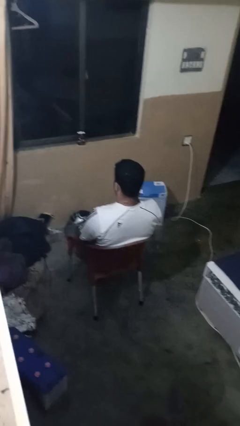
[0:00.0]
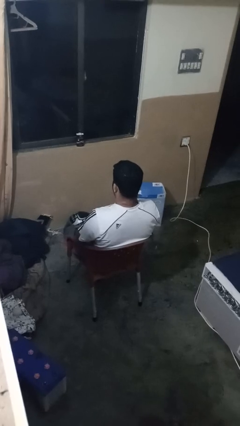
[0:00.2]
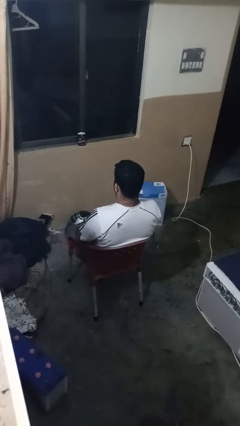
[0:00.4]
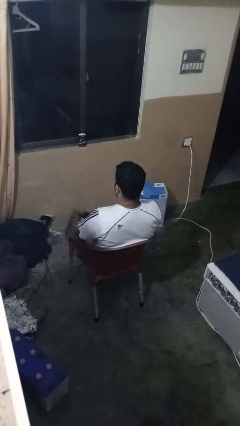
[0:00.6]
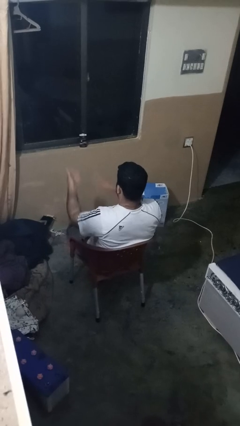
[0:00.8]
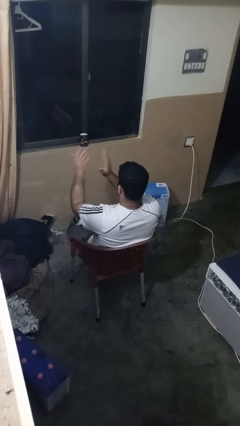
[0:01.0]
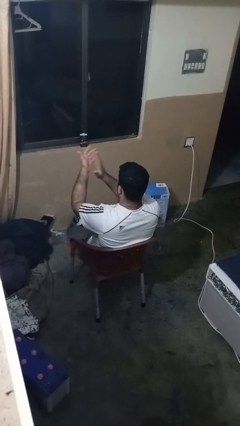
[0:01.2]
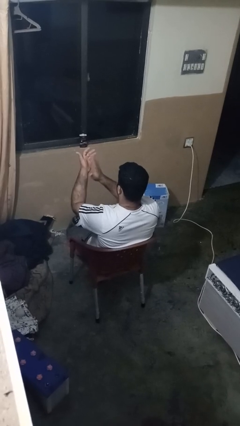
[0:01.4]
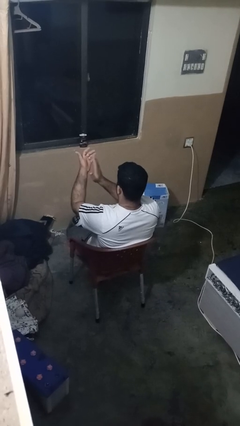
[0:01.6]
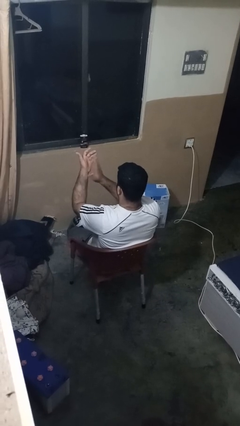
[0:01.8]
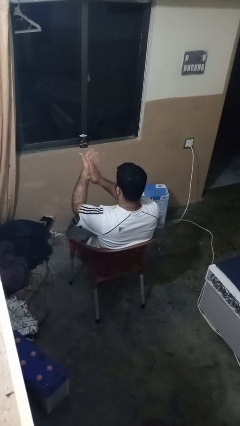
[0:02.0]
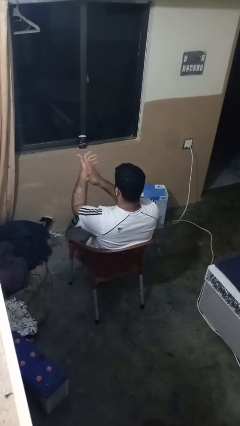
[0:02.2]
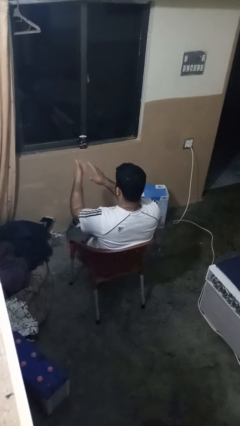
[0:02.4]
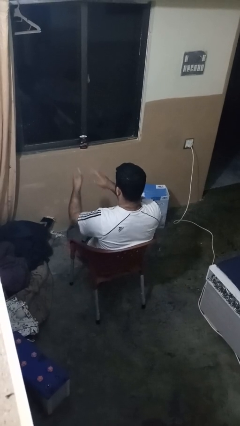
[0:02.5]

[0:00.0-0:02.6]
person slaps hands on thighs

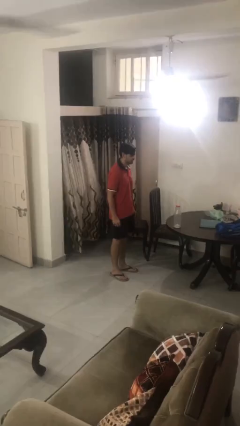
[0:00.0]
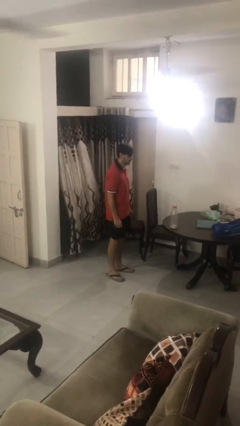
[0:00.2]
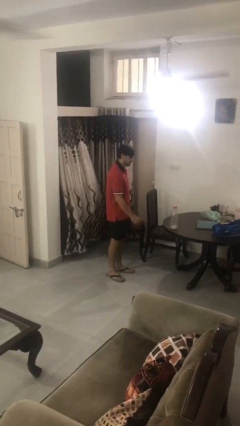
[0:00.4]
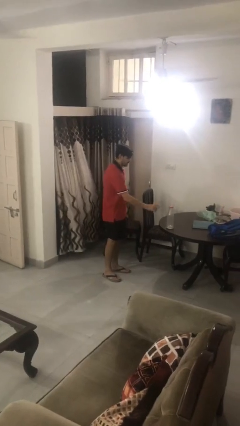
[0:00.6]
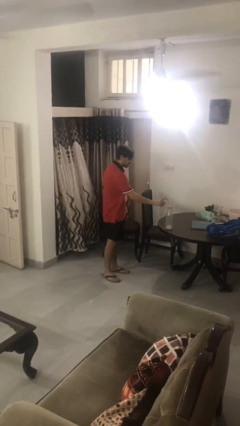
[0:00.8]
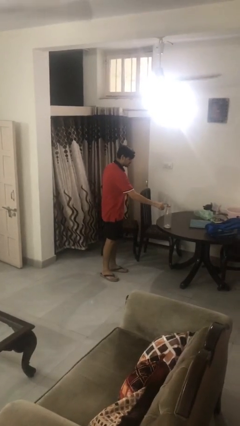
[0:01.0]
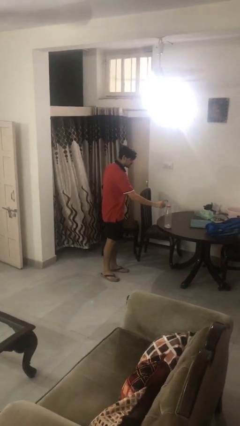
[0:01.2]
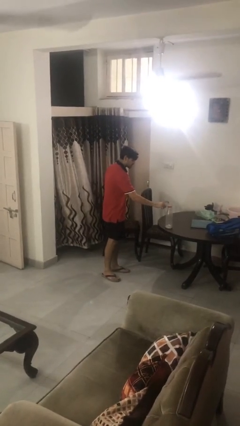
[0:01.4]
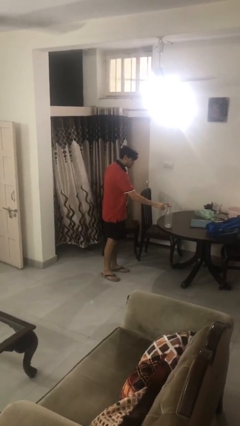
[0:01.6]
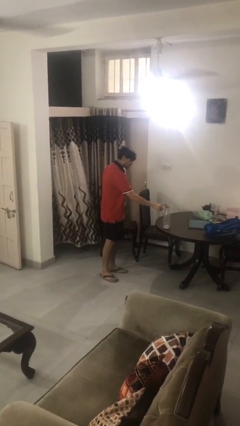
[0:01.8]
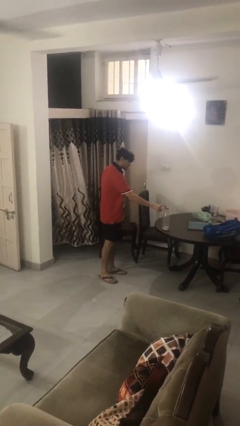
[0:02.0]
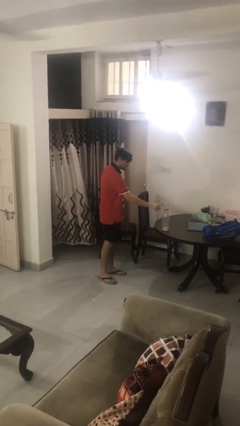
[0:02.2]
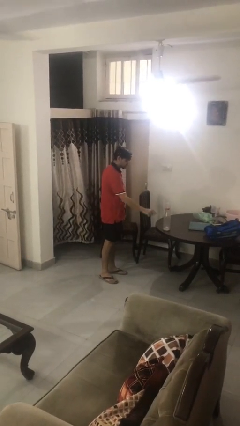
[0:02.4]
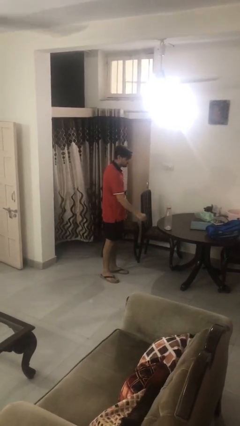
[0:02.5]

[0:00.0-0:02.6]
person taps object with finger

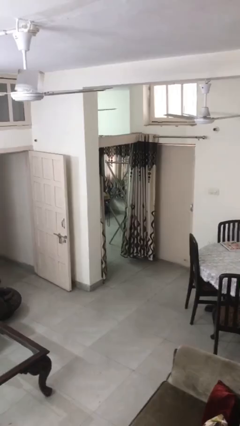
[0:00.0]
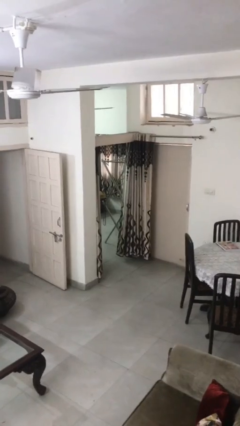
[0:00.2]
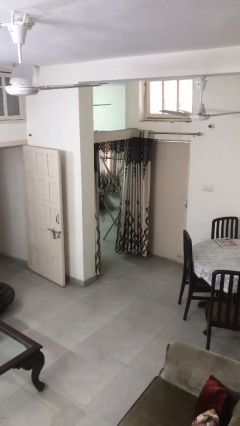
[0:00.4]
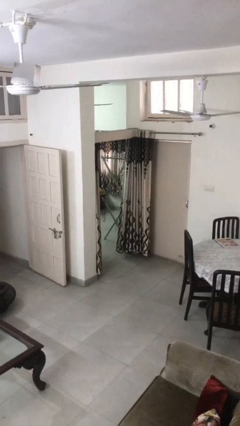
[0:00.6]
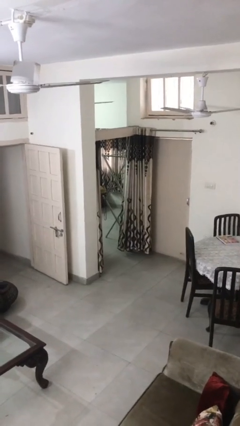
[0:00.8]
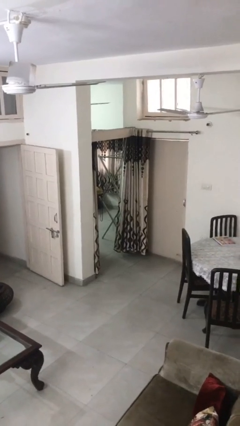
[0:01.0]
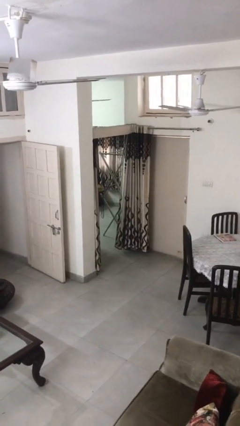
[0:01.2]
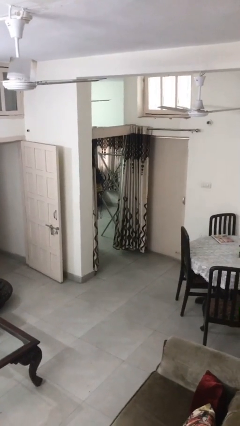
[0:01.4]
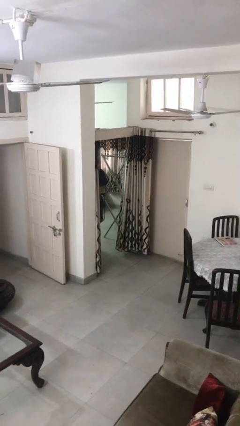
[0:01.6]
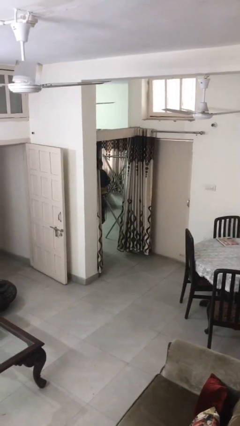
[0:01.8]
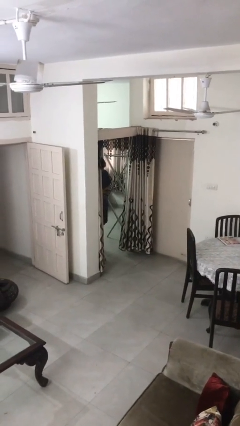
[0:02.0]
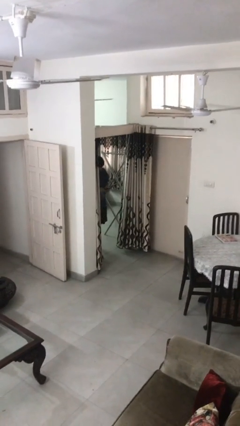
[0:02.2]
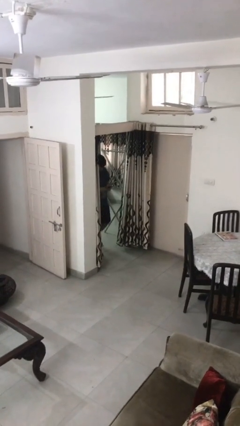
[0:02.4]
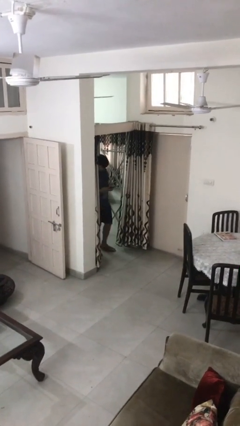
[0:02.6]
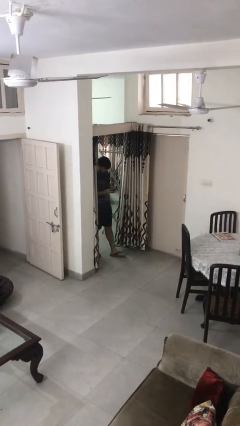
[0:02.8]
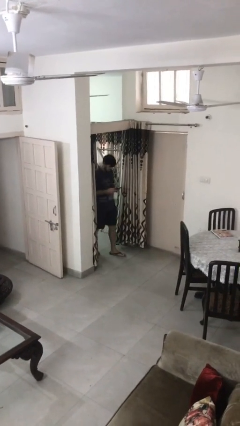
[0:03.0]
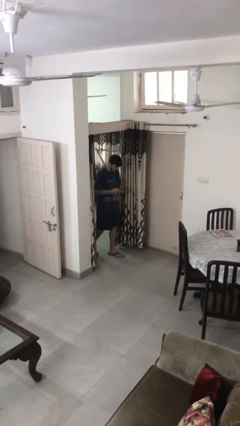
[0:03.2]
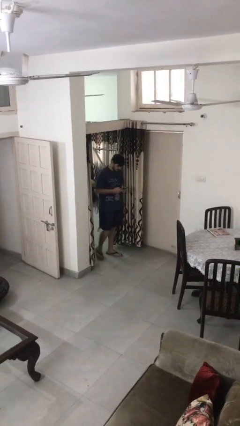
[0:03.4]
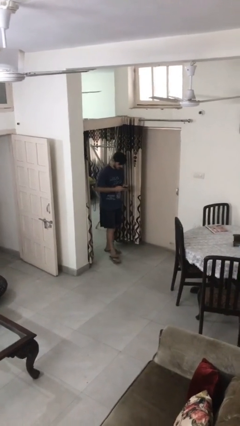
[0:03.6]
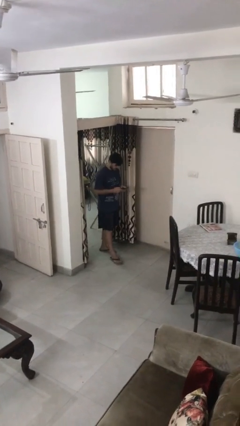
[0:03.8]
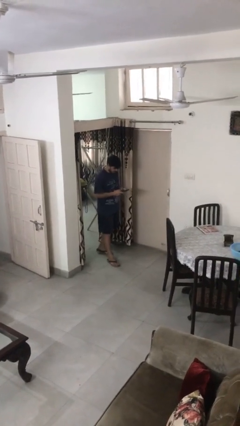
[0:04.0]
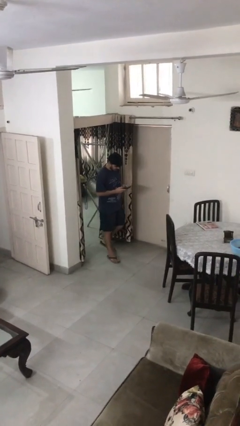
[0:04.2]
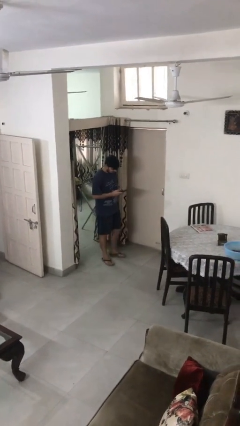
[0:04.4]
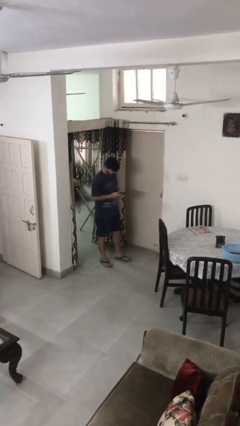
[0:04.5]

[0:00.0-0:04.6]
person enters scene through structure

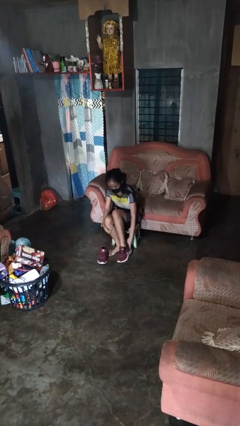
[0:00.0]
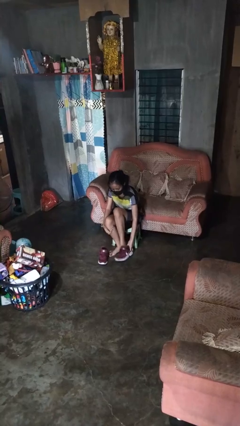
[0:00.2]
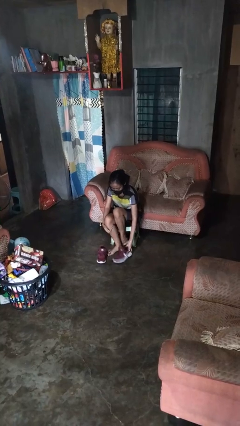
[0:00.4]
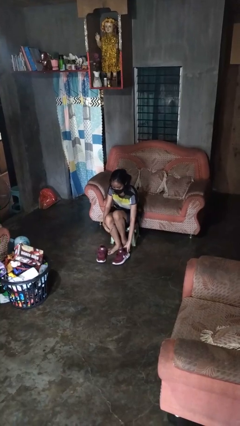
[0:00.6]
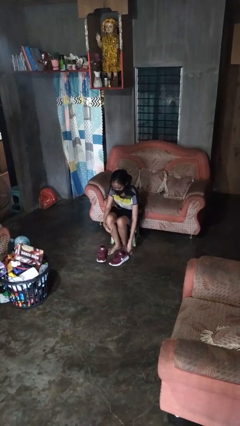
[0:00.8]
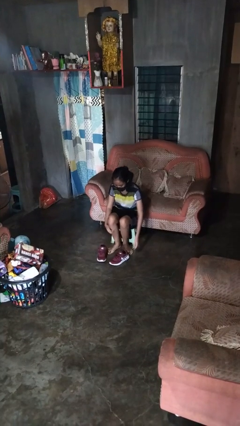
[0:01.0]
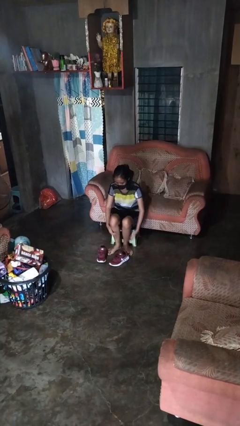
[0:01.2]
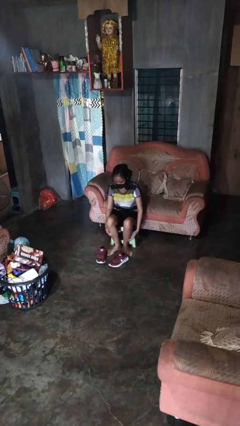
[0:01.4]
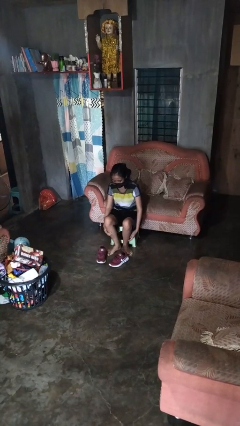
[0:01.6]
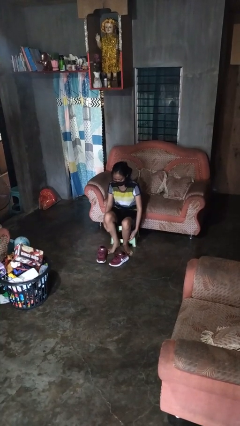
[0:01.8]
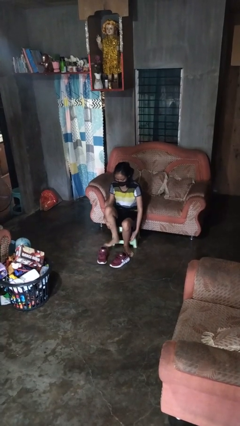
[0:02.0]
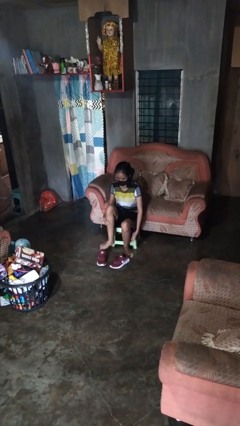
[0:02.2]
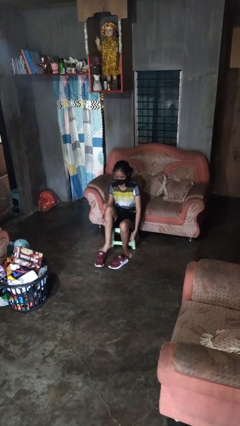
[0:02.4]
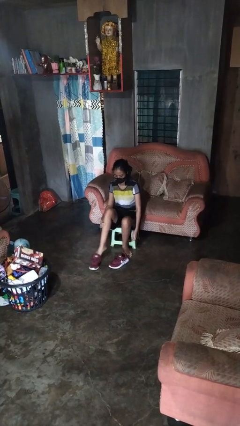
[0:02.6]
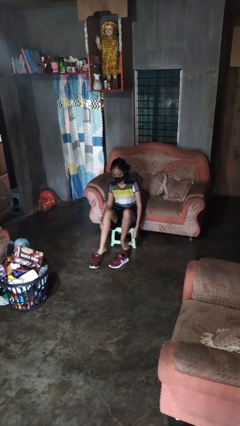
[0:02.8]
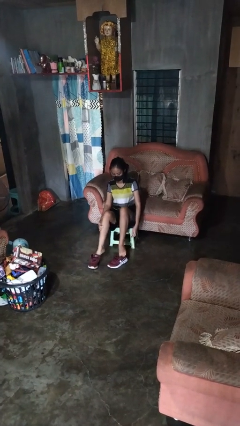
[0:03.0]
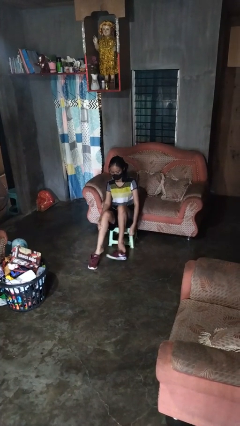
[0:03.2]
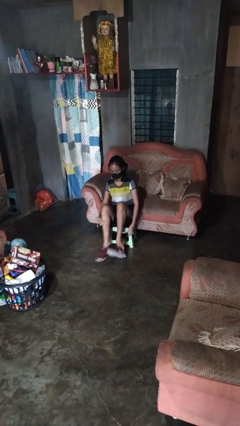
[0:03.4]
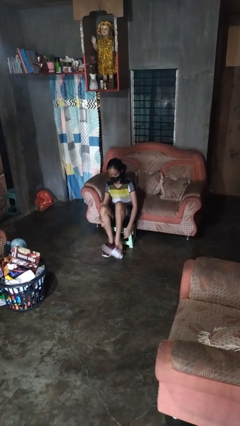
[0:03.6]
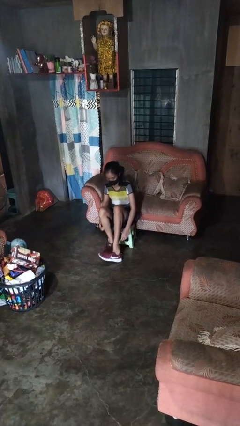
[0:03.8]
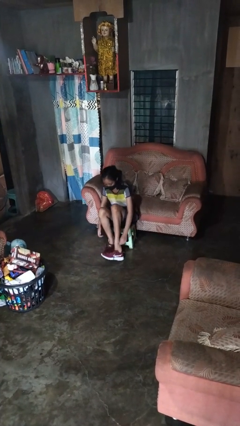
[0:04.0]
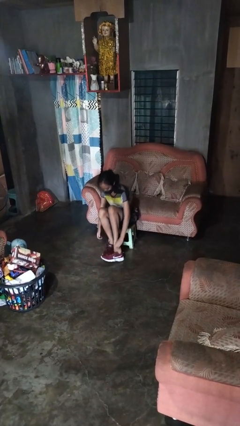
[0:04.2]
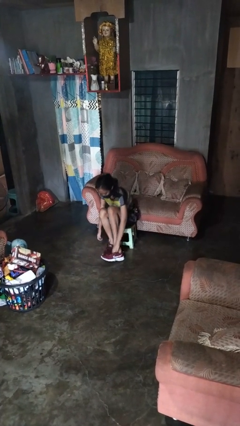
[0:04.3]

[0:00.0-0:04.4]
person puts on shoes

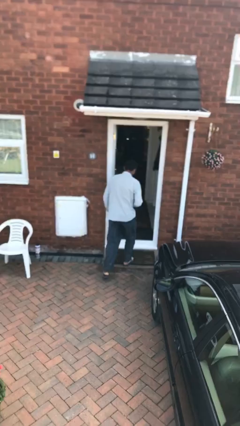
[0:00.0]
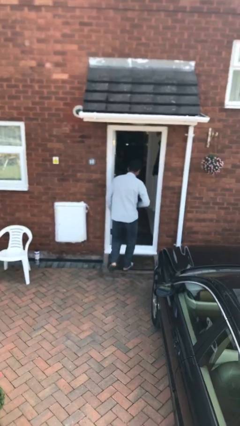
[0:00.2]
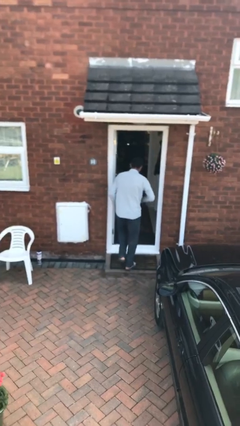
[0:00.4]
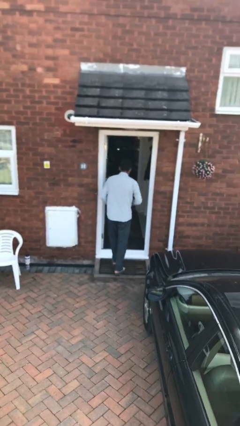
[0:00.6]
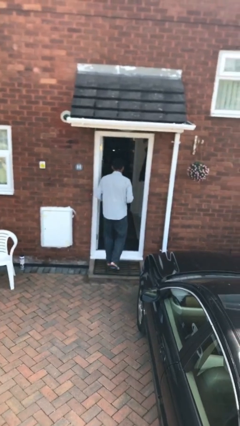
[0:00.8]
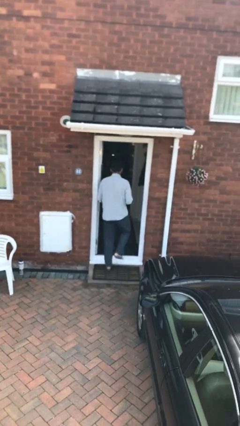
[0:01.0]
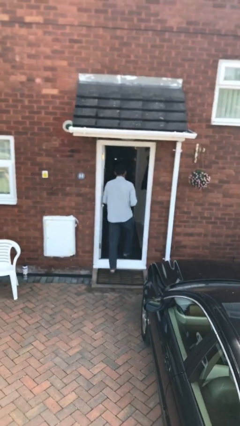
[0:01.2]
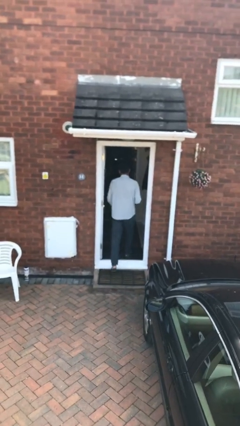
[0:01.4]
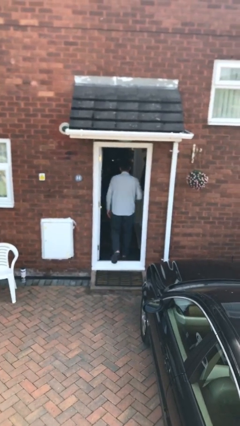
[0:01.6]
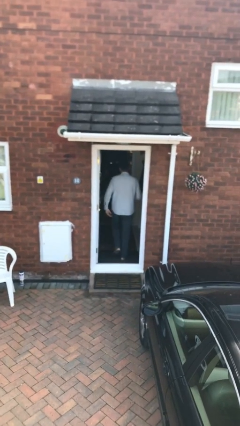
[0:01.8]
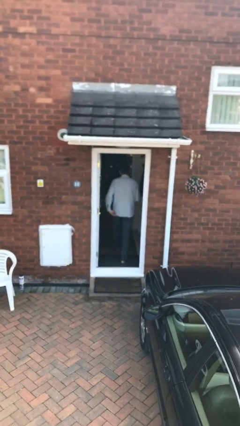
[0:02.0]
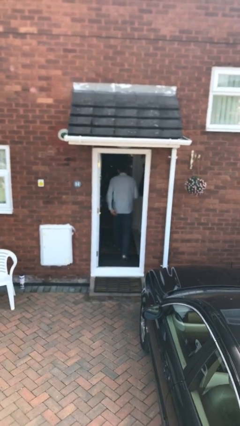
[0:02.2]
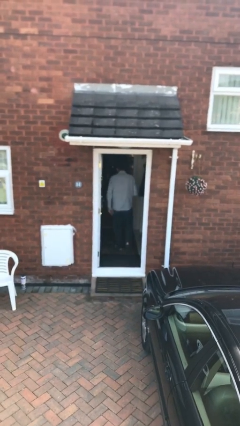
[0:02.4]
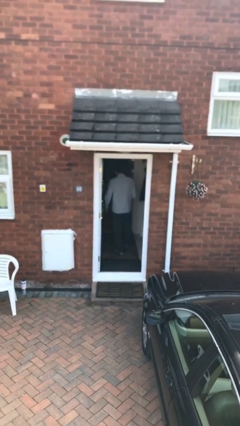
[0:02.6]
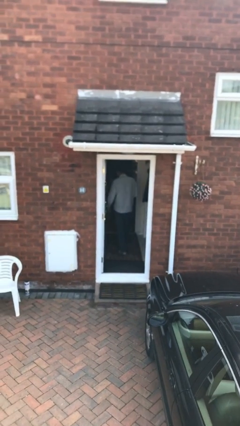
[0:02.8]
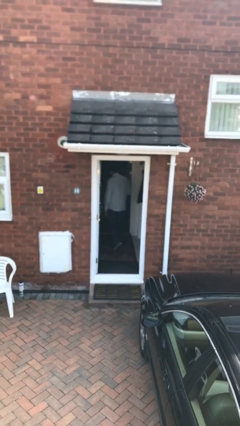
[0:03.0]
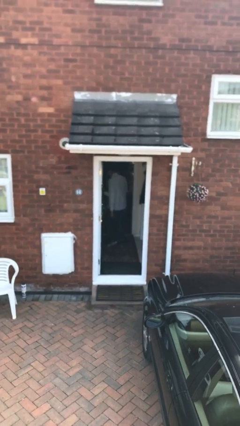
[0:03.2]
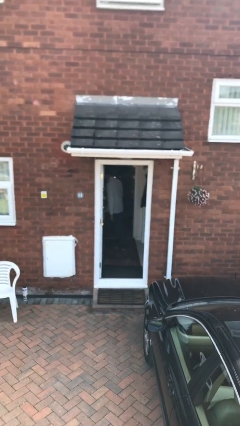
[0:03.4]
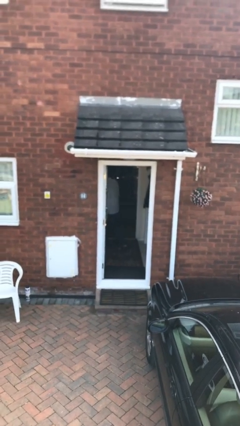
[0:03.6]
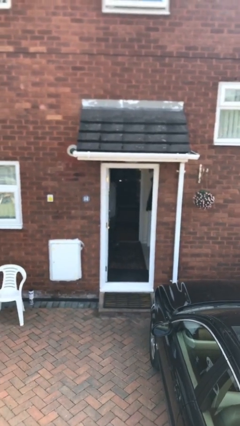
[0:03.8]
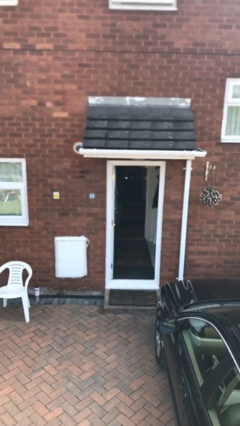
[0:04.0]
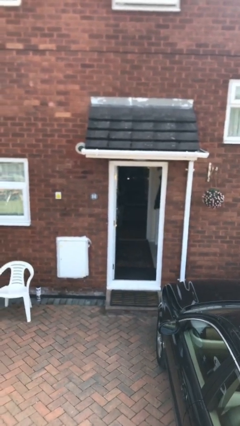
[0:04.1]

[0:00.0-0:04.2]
person exits scene through structure
